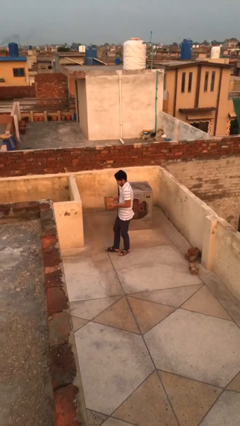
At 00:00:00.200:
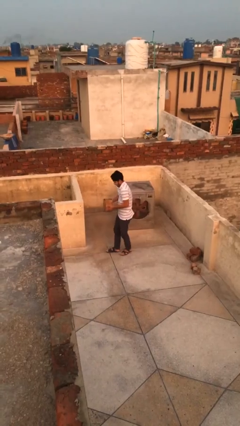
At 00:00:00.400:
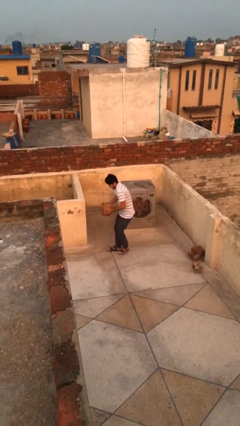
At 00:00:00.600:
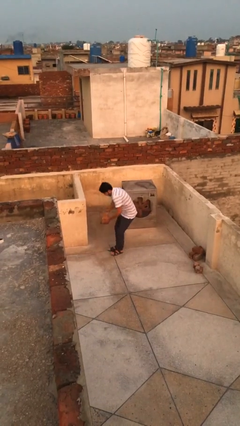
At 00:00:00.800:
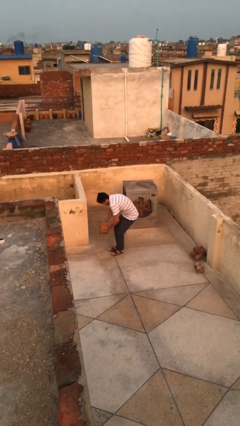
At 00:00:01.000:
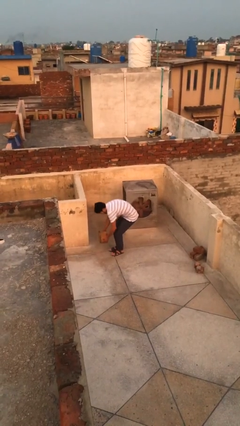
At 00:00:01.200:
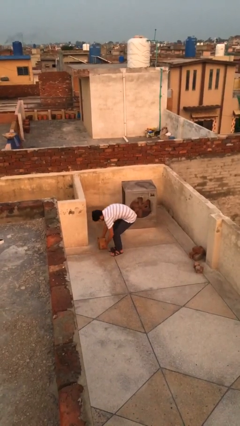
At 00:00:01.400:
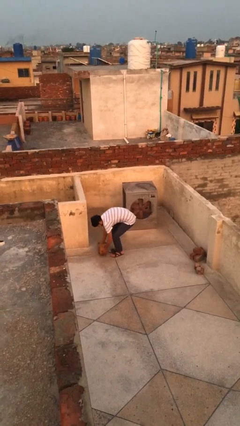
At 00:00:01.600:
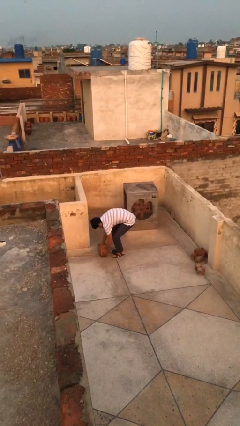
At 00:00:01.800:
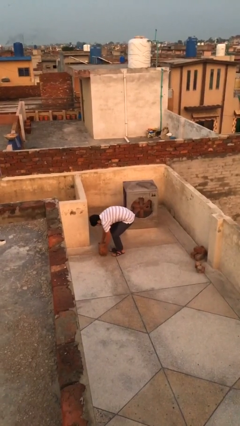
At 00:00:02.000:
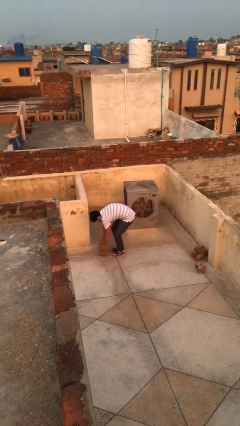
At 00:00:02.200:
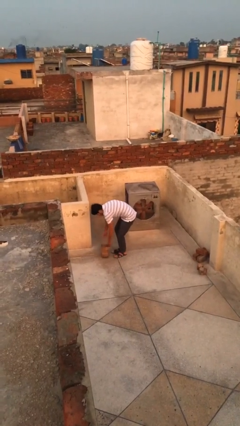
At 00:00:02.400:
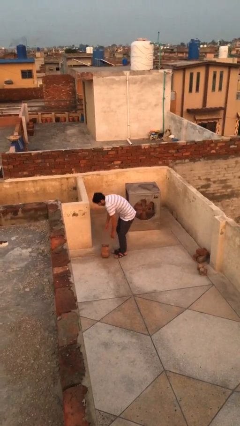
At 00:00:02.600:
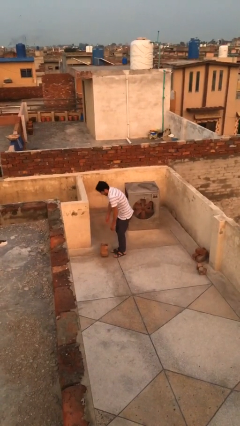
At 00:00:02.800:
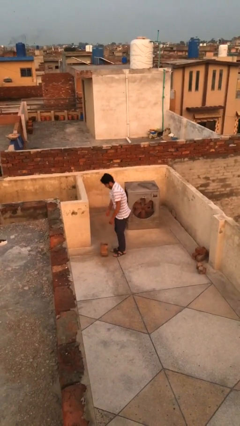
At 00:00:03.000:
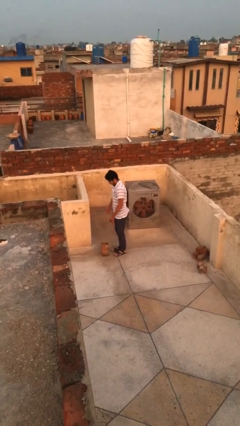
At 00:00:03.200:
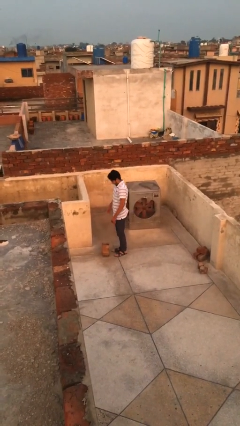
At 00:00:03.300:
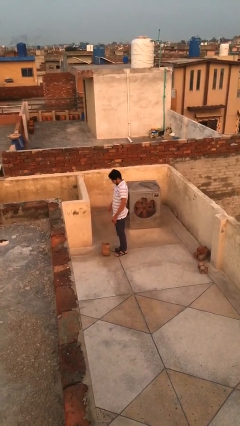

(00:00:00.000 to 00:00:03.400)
person puts down object on floor

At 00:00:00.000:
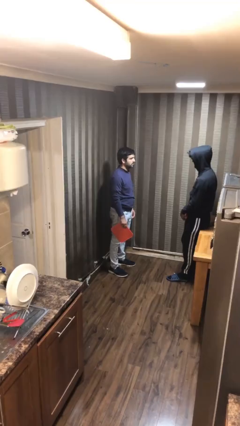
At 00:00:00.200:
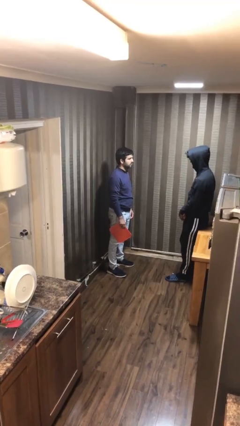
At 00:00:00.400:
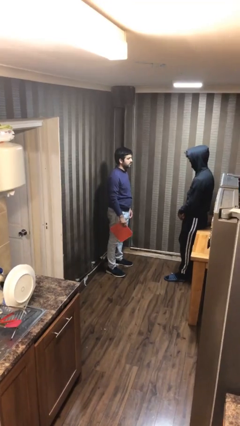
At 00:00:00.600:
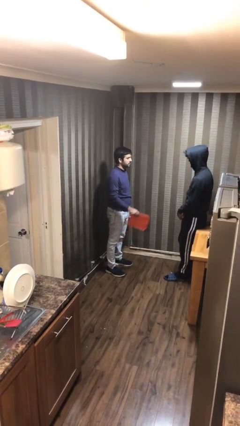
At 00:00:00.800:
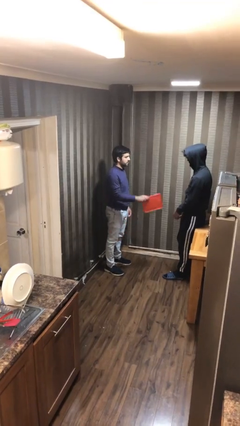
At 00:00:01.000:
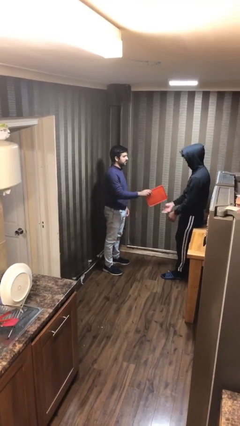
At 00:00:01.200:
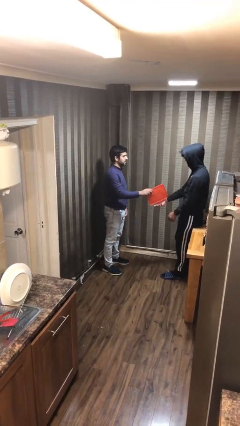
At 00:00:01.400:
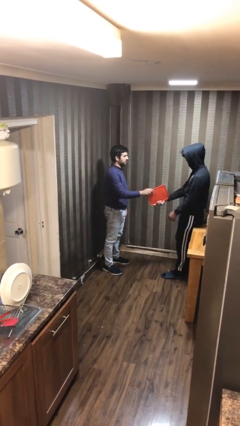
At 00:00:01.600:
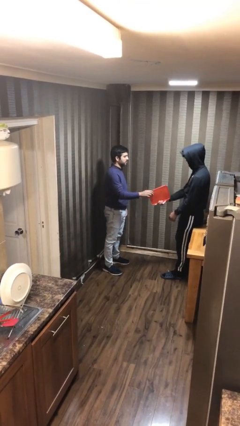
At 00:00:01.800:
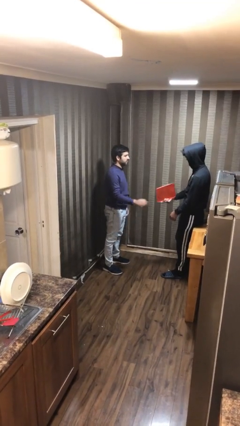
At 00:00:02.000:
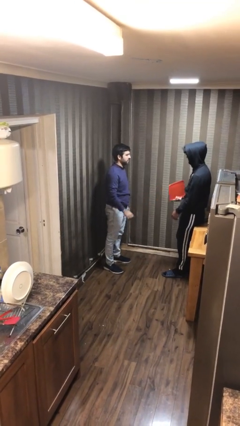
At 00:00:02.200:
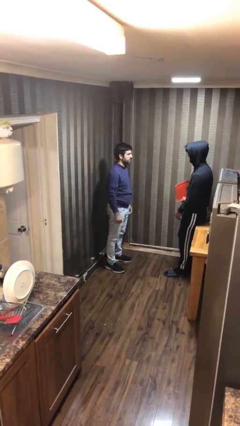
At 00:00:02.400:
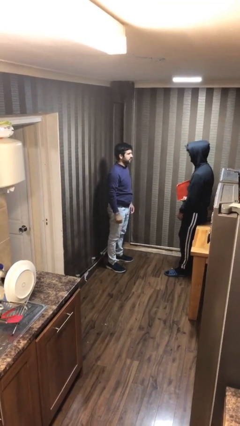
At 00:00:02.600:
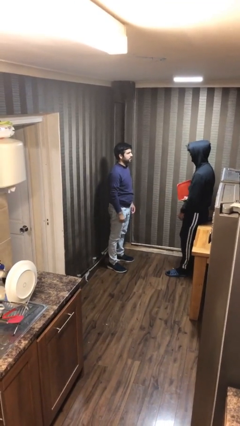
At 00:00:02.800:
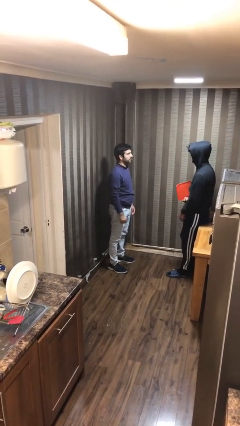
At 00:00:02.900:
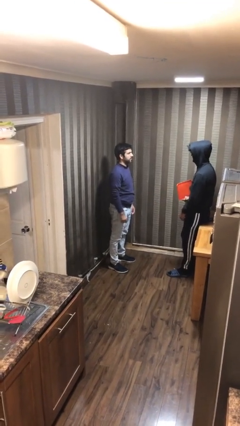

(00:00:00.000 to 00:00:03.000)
person transfers object to person

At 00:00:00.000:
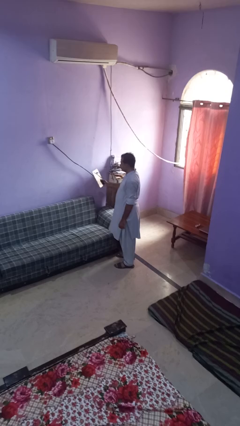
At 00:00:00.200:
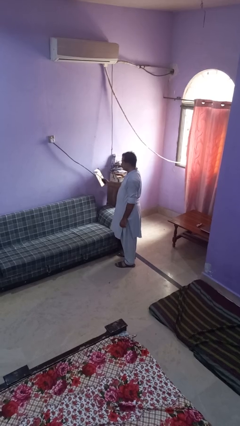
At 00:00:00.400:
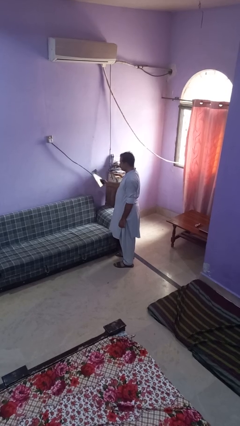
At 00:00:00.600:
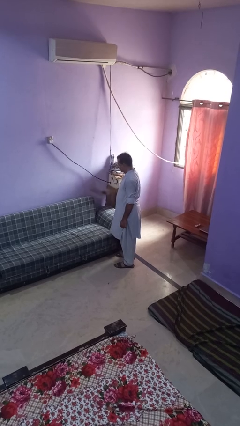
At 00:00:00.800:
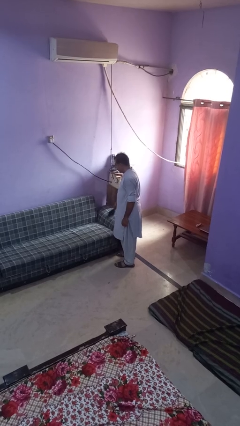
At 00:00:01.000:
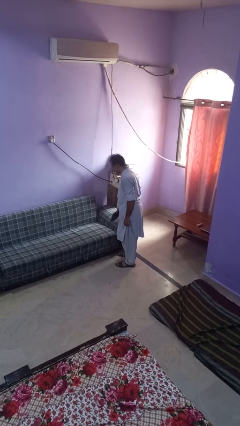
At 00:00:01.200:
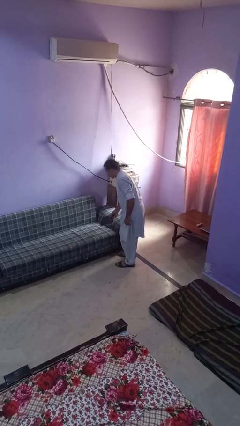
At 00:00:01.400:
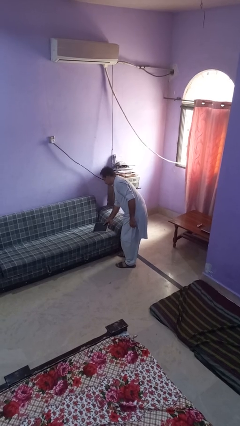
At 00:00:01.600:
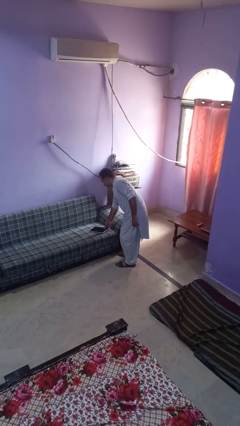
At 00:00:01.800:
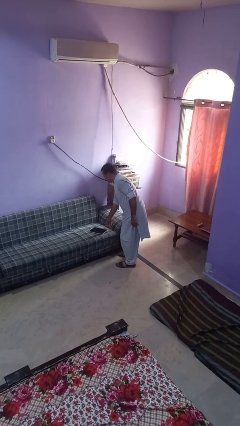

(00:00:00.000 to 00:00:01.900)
person puts down object on couch

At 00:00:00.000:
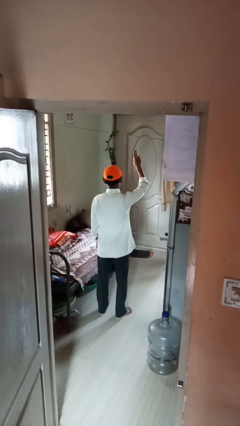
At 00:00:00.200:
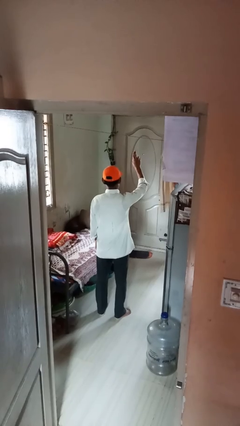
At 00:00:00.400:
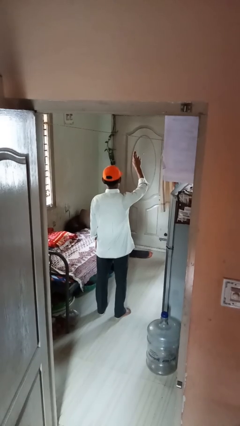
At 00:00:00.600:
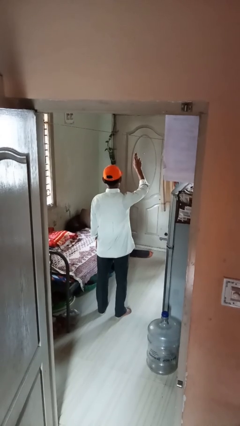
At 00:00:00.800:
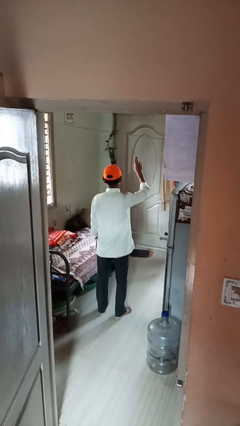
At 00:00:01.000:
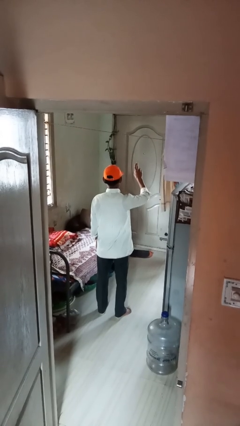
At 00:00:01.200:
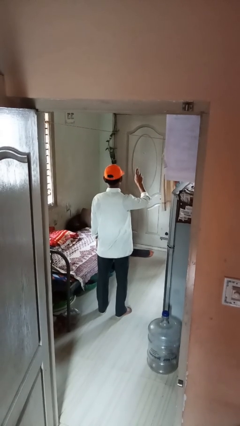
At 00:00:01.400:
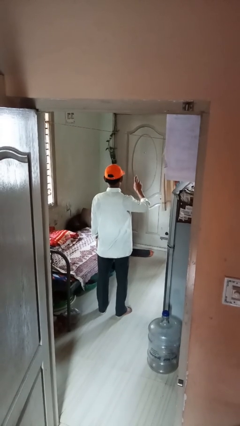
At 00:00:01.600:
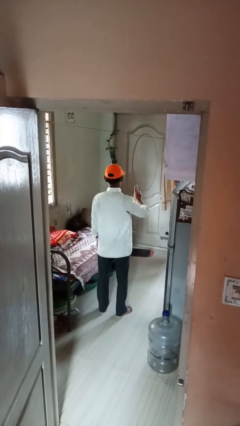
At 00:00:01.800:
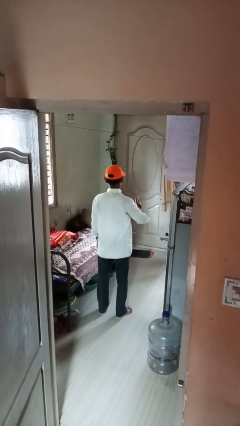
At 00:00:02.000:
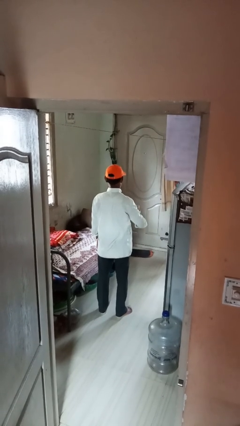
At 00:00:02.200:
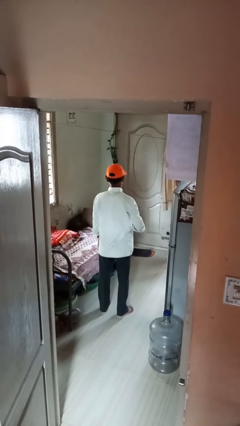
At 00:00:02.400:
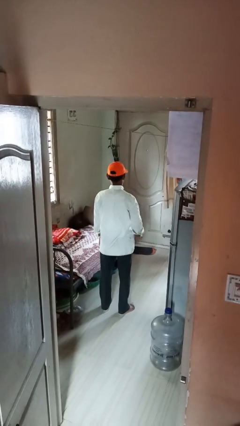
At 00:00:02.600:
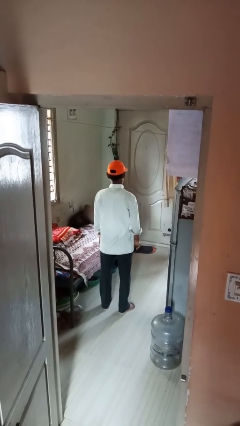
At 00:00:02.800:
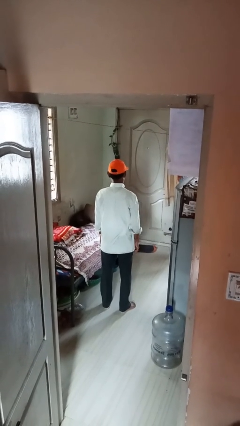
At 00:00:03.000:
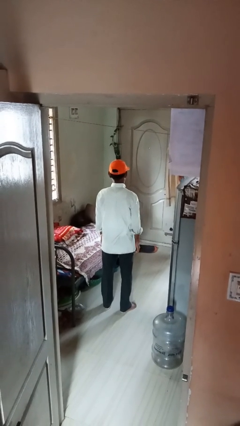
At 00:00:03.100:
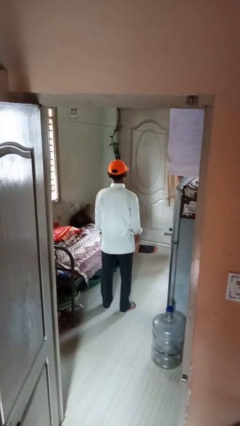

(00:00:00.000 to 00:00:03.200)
person gestures swipe down

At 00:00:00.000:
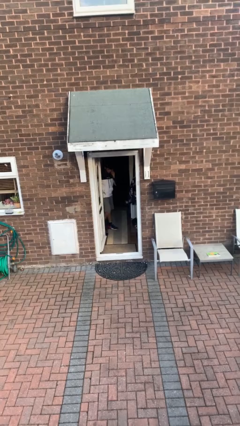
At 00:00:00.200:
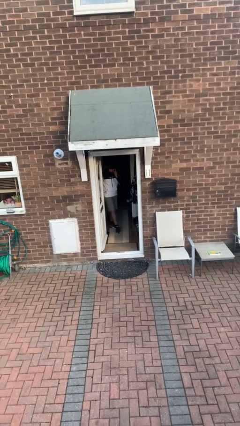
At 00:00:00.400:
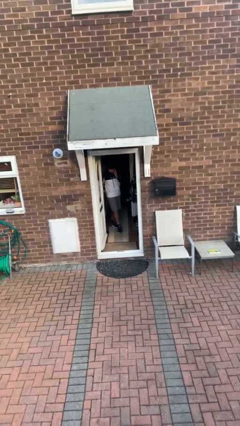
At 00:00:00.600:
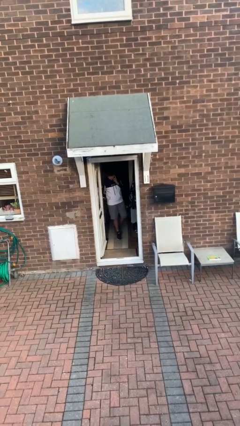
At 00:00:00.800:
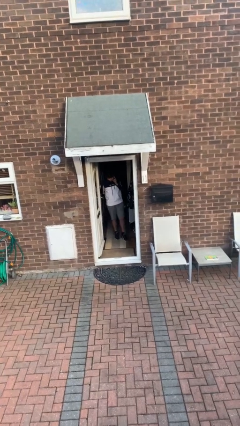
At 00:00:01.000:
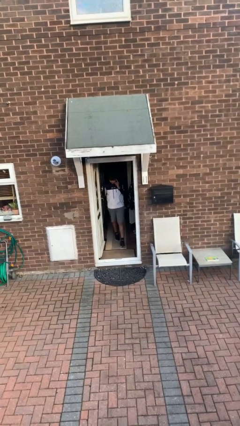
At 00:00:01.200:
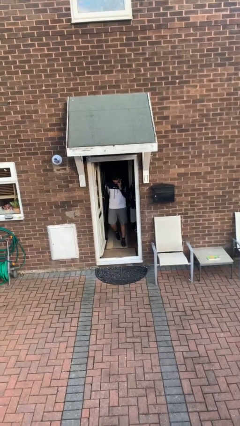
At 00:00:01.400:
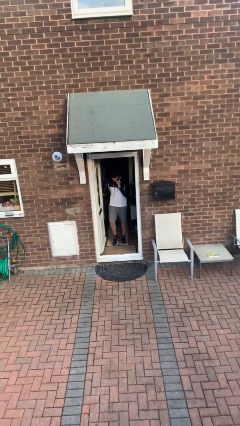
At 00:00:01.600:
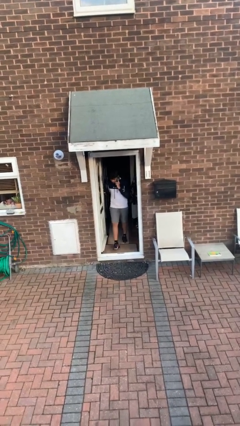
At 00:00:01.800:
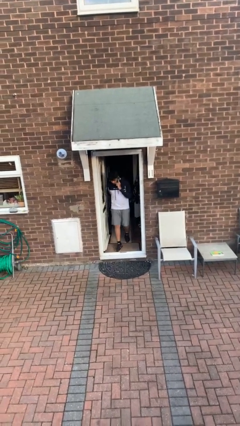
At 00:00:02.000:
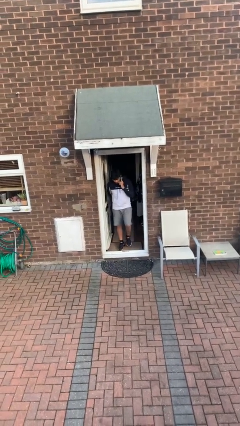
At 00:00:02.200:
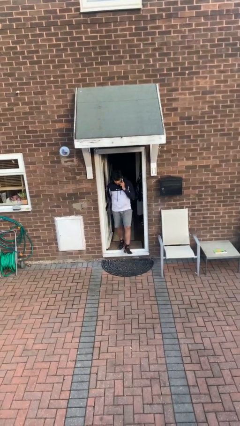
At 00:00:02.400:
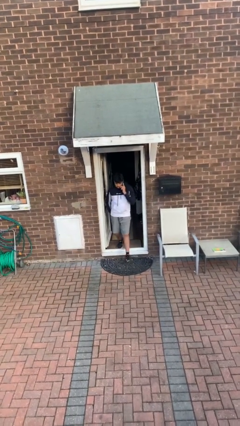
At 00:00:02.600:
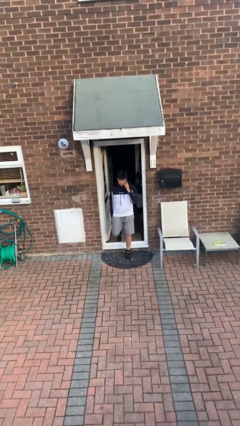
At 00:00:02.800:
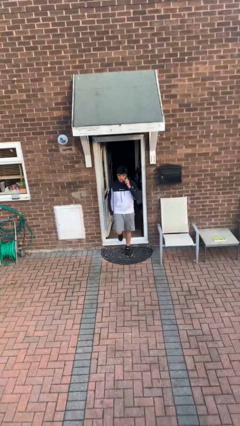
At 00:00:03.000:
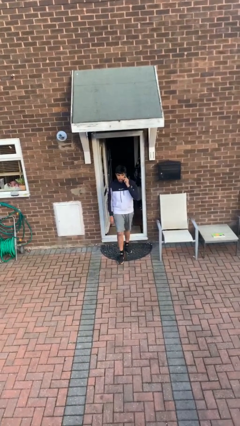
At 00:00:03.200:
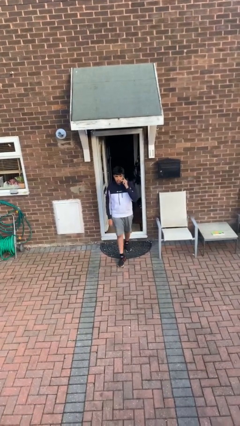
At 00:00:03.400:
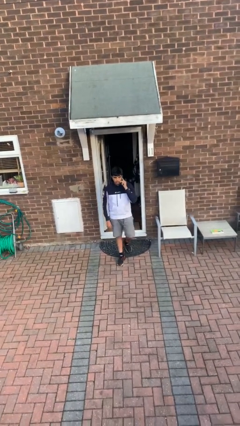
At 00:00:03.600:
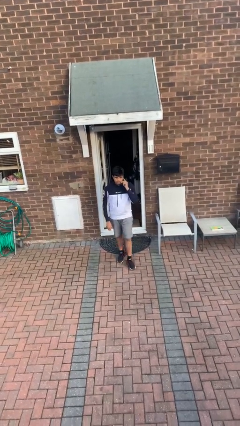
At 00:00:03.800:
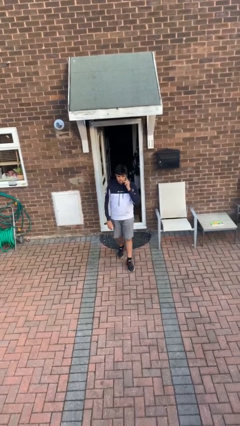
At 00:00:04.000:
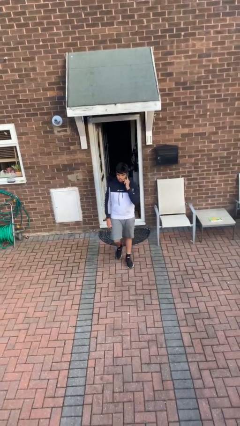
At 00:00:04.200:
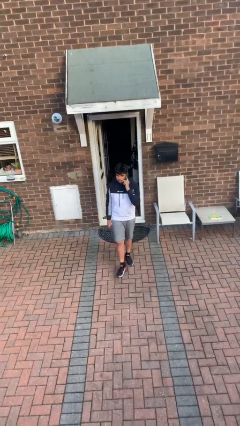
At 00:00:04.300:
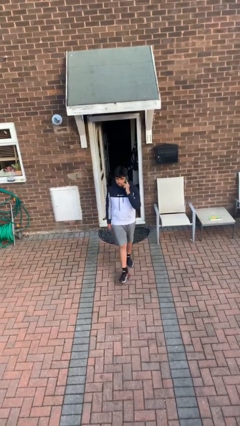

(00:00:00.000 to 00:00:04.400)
person enters scene through structure

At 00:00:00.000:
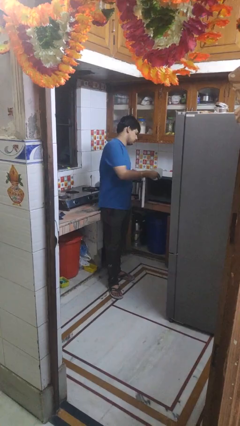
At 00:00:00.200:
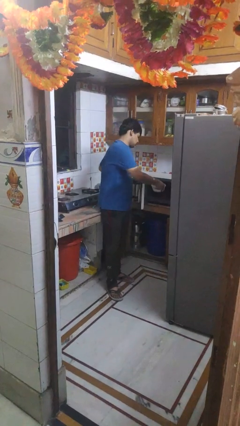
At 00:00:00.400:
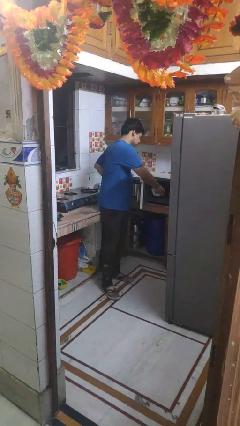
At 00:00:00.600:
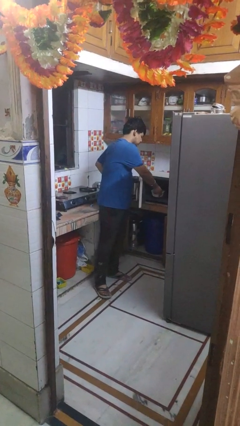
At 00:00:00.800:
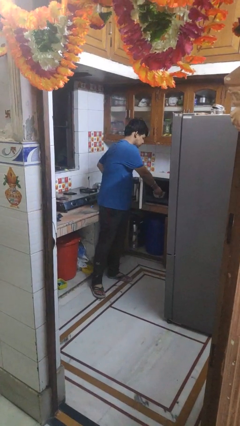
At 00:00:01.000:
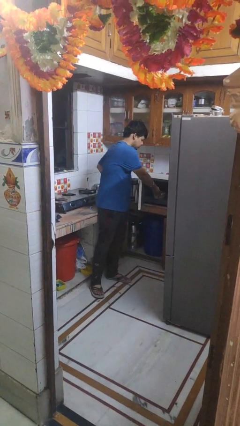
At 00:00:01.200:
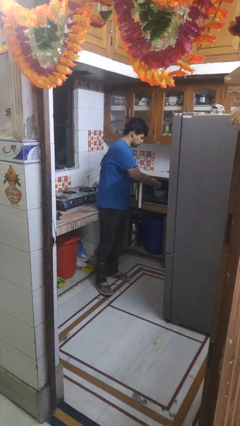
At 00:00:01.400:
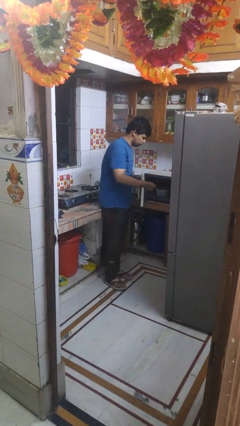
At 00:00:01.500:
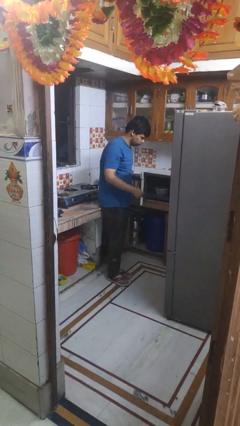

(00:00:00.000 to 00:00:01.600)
person puts object into microwave
